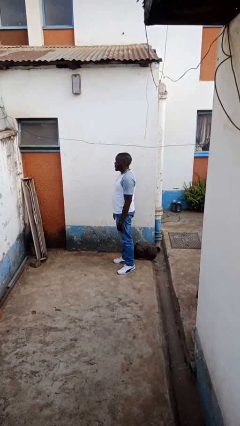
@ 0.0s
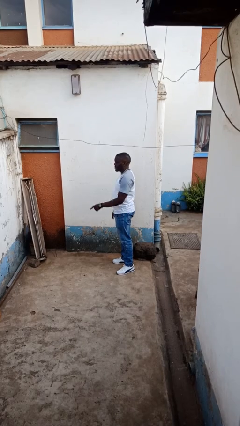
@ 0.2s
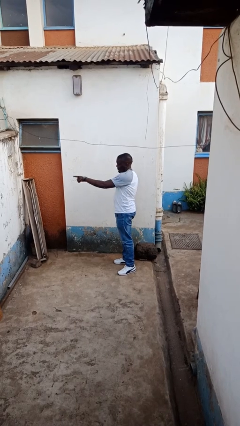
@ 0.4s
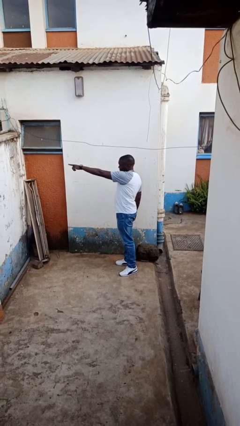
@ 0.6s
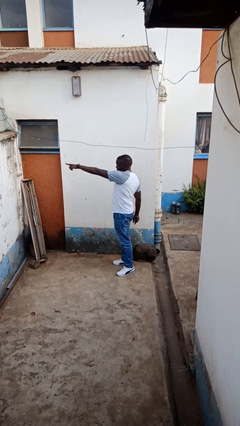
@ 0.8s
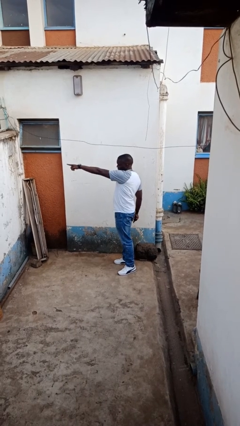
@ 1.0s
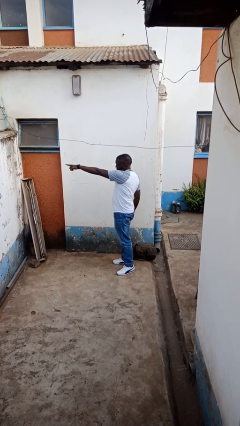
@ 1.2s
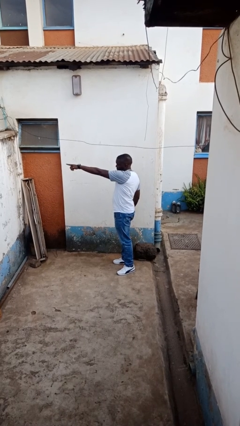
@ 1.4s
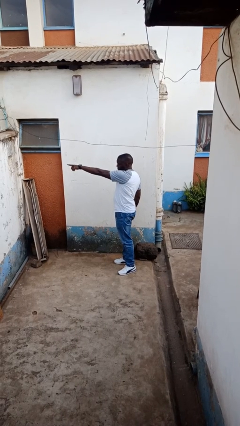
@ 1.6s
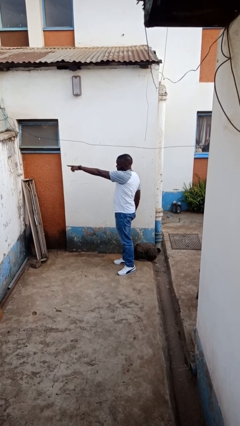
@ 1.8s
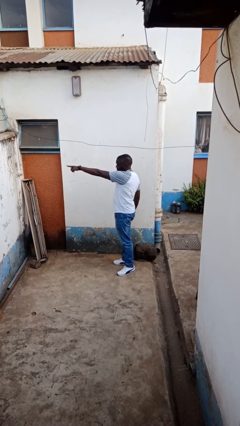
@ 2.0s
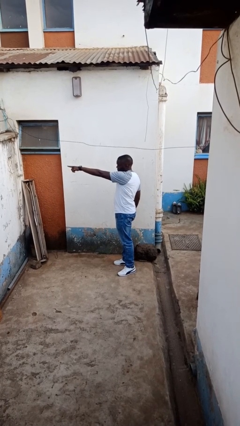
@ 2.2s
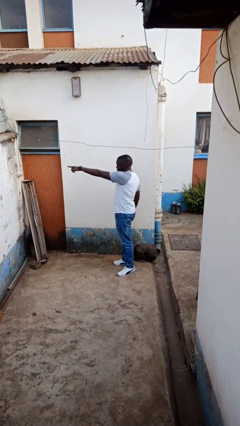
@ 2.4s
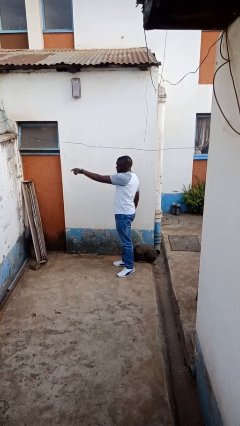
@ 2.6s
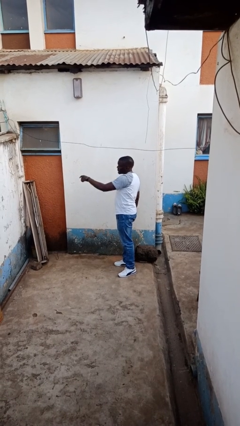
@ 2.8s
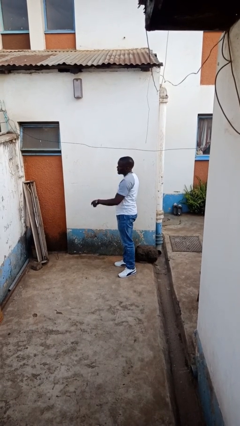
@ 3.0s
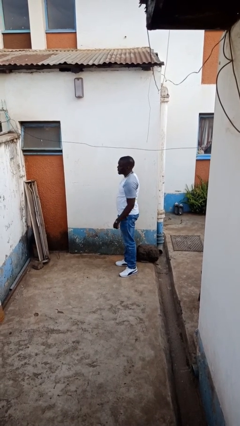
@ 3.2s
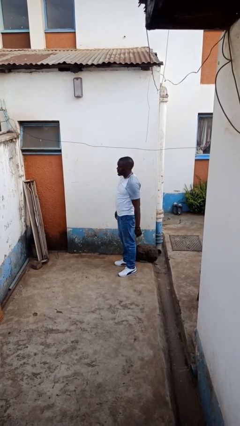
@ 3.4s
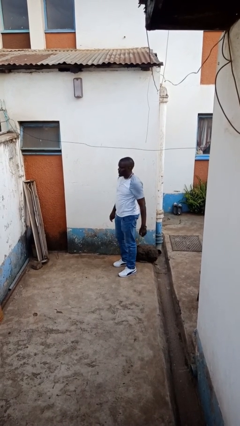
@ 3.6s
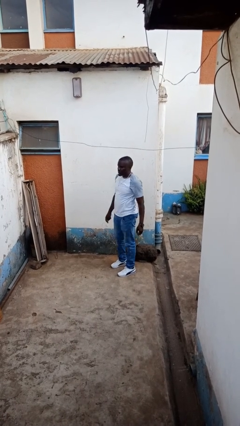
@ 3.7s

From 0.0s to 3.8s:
person points at person

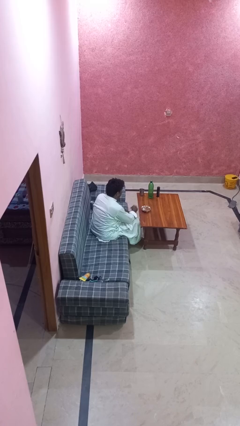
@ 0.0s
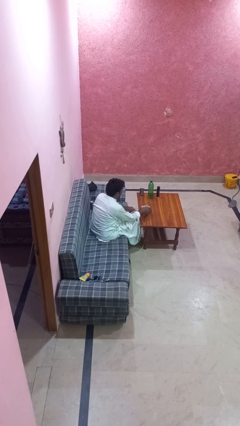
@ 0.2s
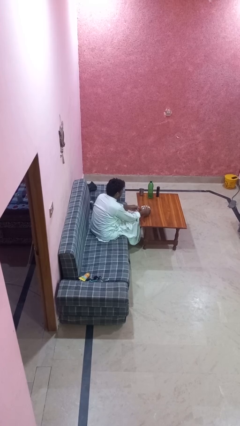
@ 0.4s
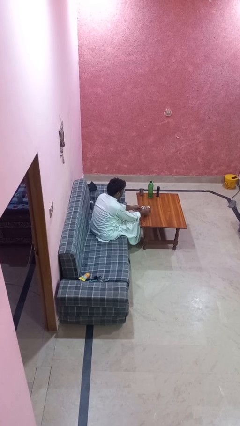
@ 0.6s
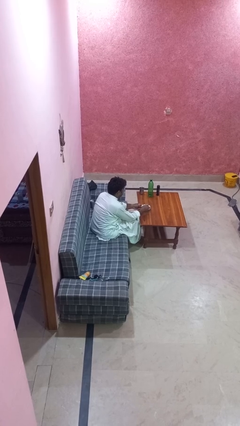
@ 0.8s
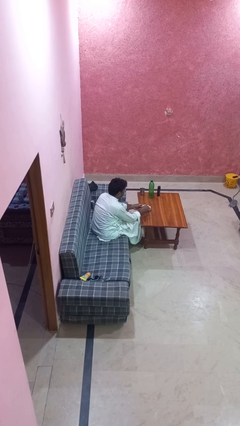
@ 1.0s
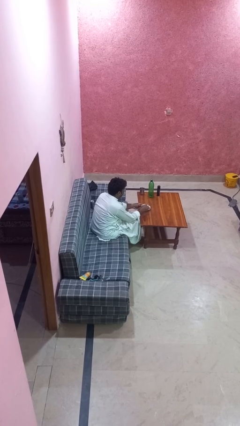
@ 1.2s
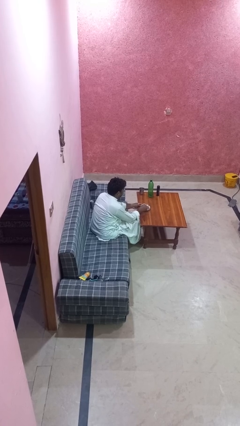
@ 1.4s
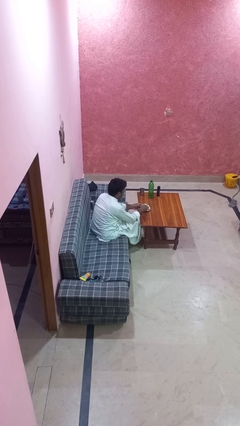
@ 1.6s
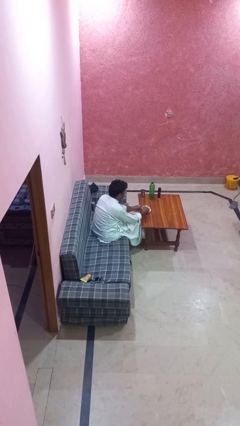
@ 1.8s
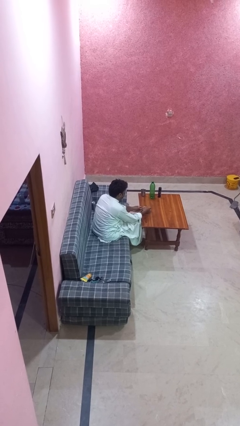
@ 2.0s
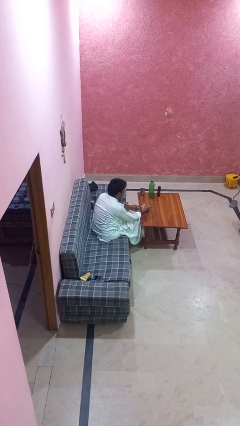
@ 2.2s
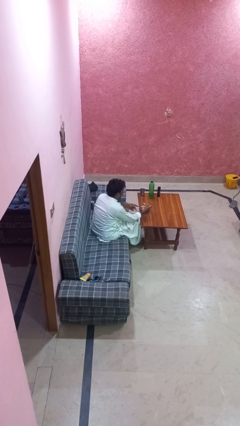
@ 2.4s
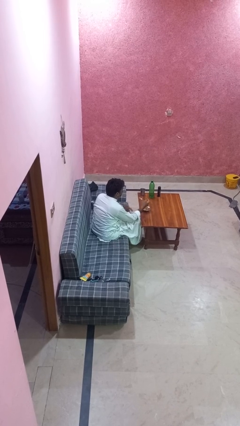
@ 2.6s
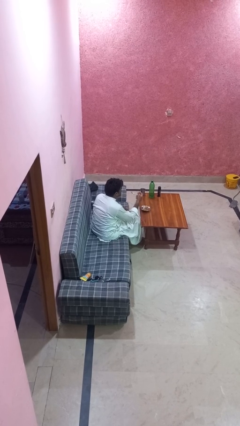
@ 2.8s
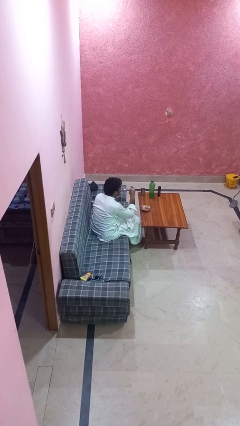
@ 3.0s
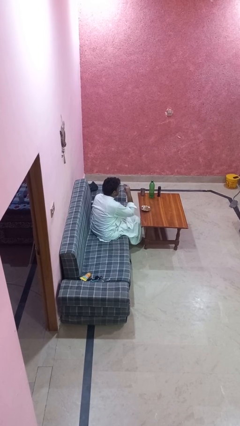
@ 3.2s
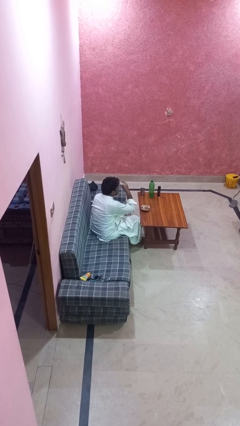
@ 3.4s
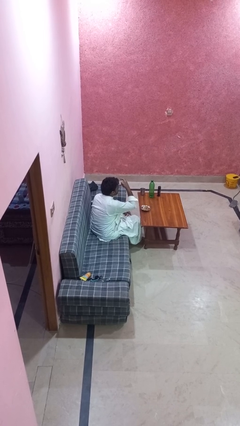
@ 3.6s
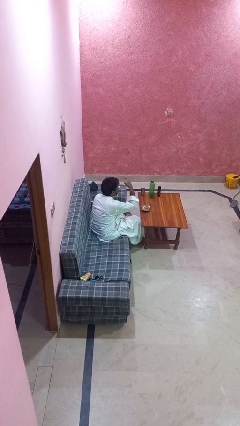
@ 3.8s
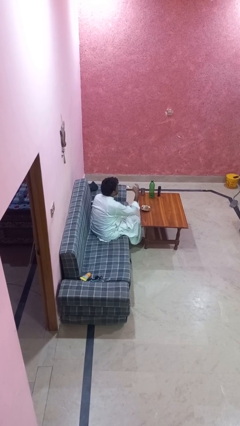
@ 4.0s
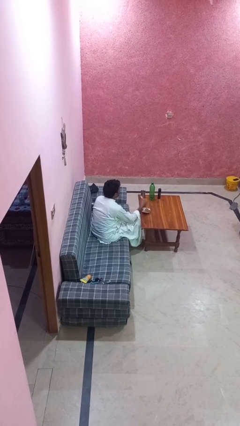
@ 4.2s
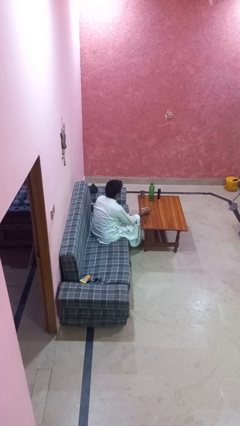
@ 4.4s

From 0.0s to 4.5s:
person eats with utensil

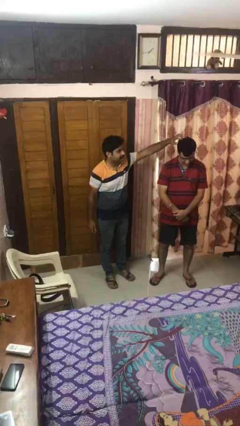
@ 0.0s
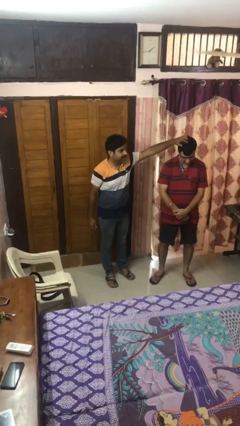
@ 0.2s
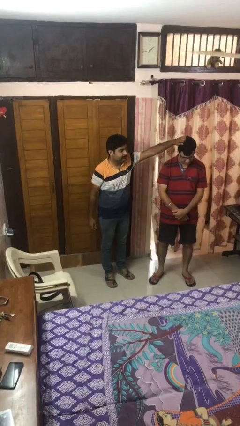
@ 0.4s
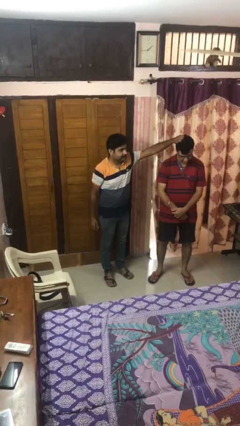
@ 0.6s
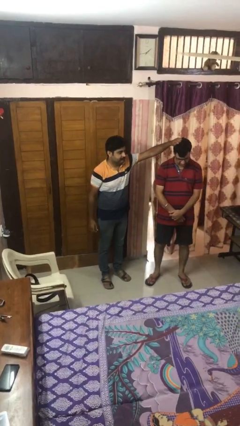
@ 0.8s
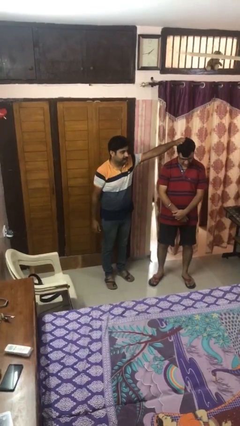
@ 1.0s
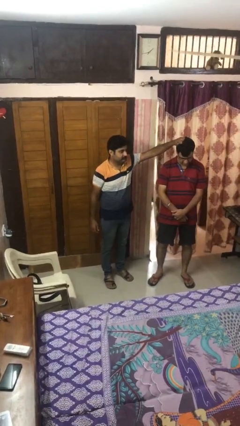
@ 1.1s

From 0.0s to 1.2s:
person grabs person by hair

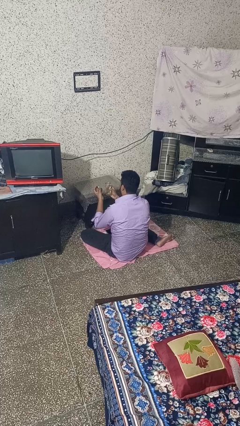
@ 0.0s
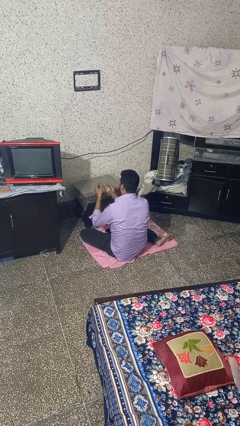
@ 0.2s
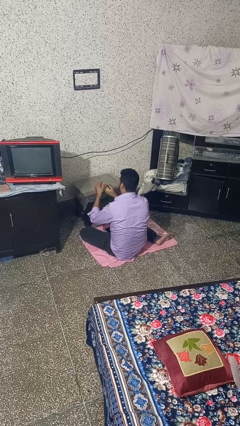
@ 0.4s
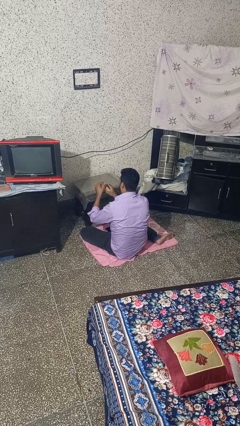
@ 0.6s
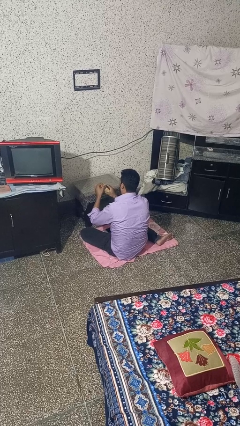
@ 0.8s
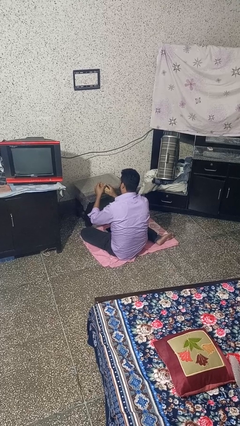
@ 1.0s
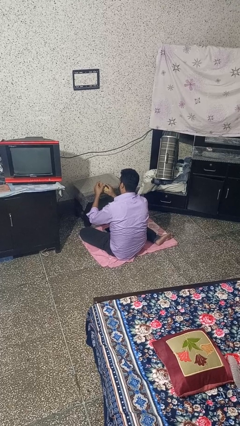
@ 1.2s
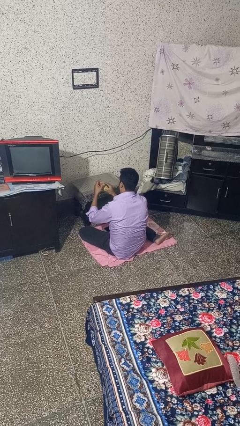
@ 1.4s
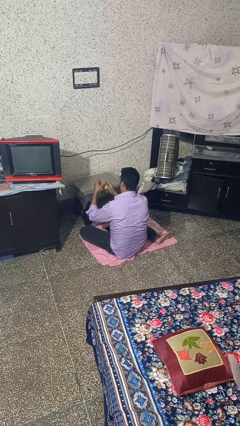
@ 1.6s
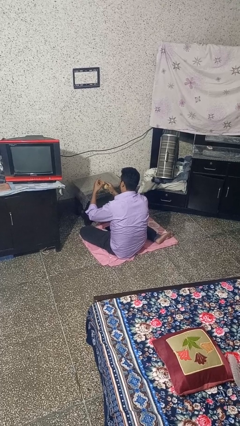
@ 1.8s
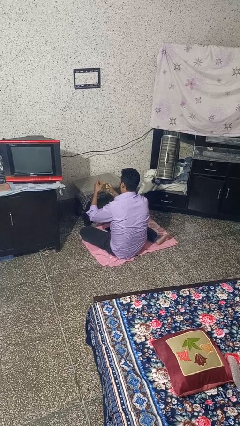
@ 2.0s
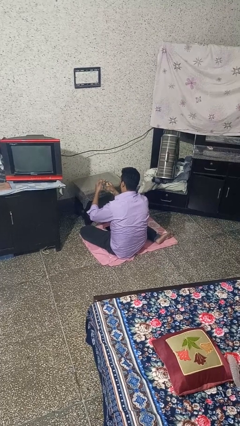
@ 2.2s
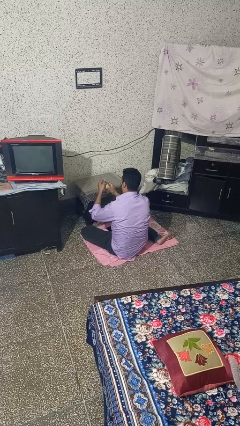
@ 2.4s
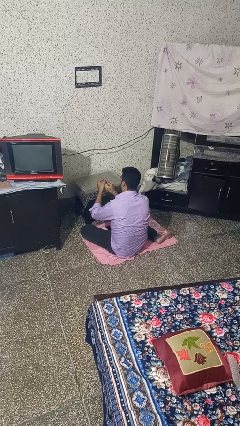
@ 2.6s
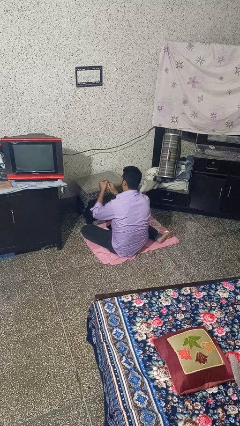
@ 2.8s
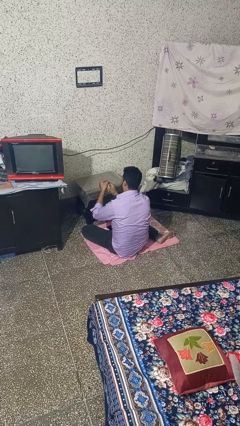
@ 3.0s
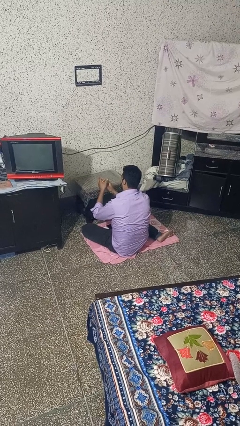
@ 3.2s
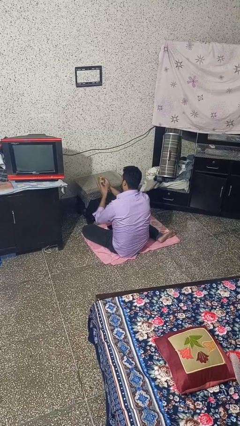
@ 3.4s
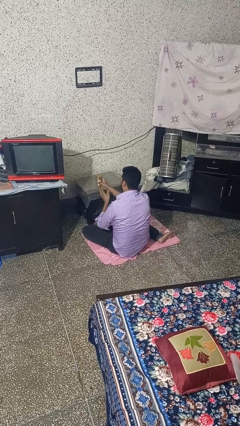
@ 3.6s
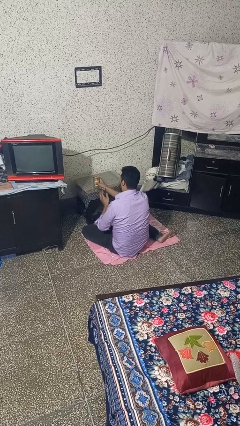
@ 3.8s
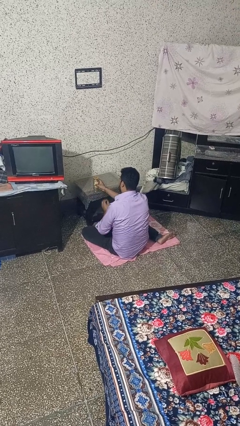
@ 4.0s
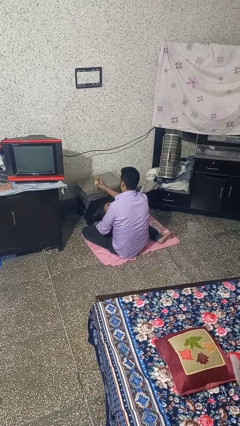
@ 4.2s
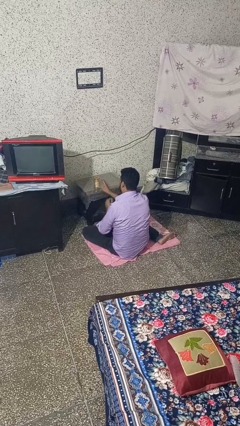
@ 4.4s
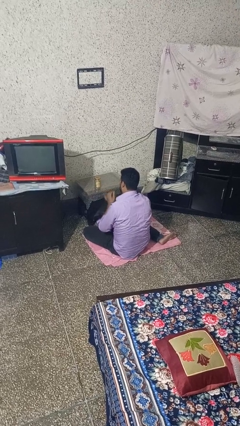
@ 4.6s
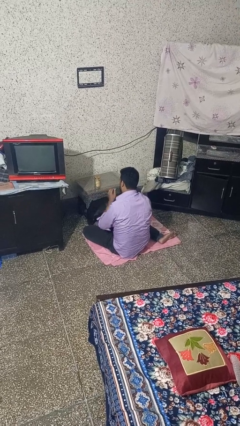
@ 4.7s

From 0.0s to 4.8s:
person closes jar

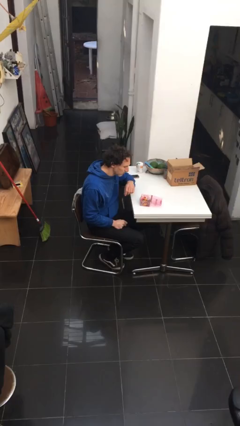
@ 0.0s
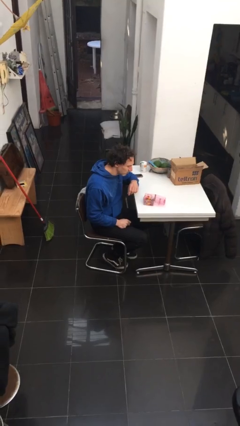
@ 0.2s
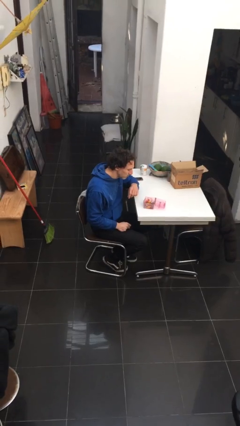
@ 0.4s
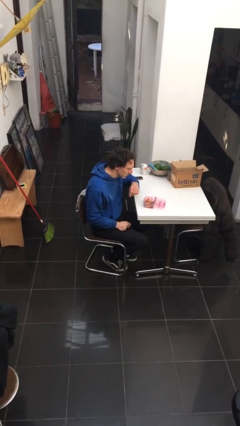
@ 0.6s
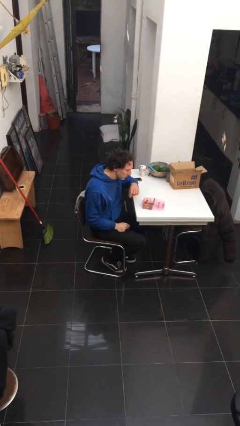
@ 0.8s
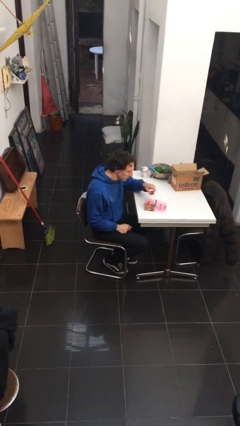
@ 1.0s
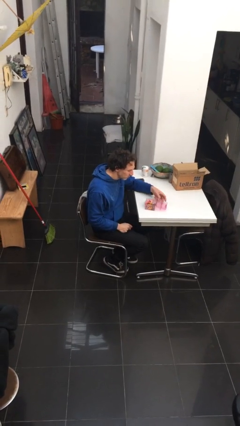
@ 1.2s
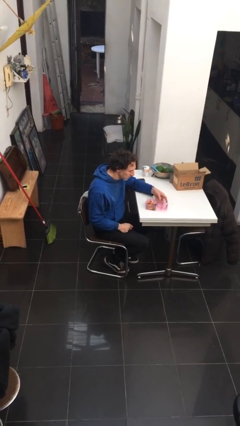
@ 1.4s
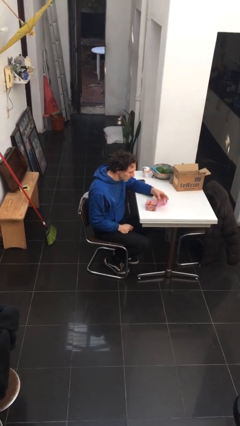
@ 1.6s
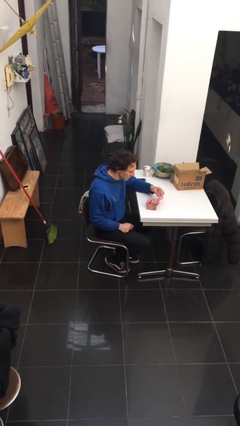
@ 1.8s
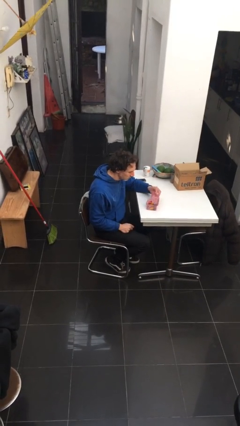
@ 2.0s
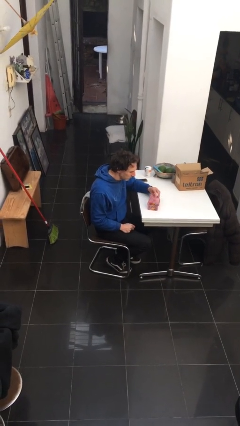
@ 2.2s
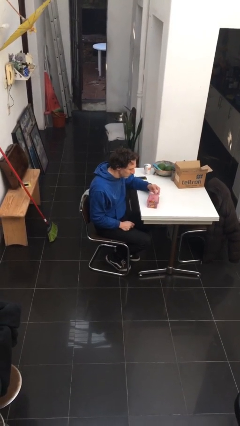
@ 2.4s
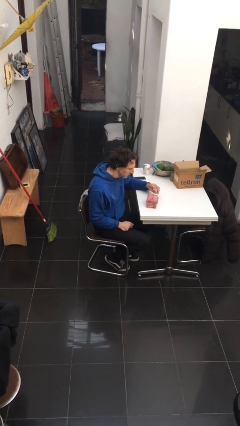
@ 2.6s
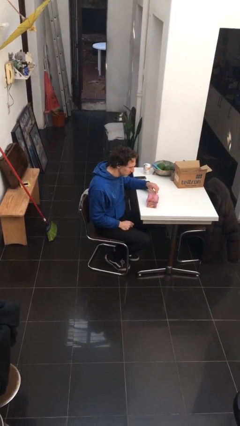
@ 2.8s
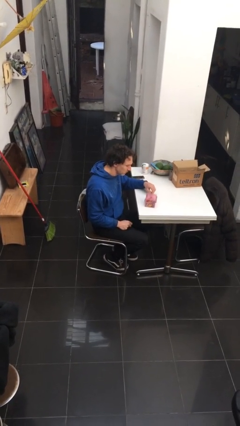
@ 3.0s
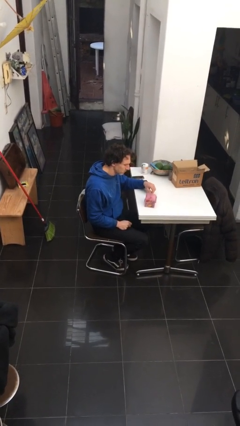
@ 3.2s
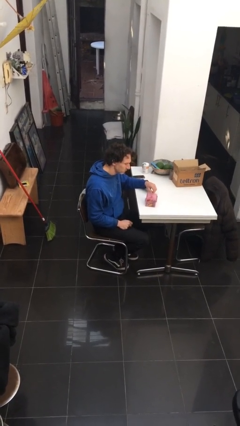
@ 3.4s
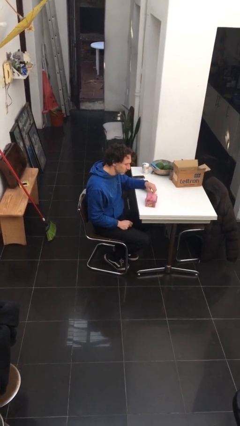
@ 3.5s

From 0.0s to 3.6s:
person closes jewelry box
